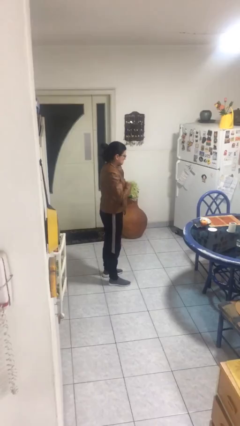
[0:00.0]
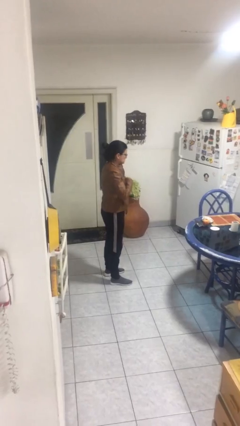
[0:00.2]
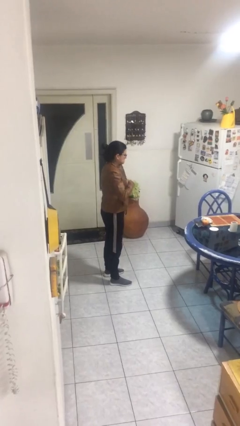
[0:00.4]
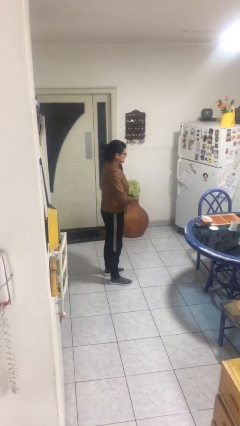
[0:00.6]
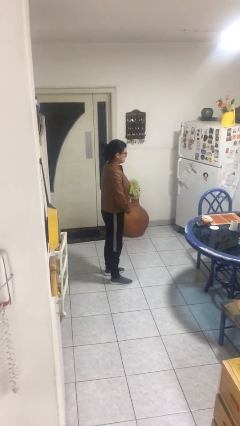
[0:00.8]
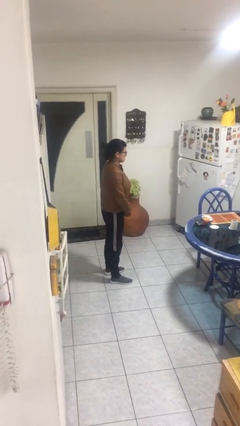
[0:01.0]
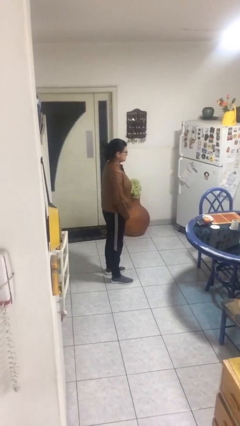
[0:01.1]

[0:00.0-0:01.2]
person unzips jacket

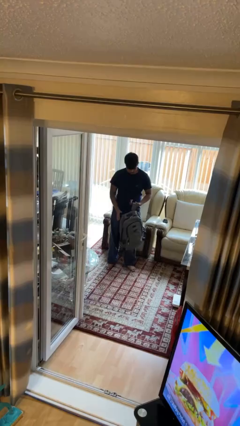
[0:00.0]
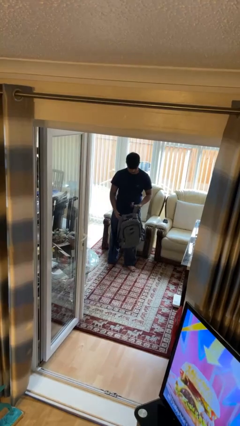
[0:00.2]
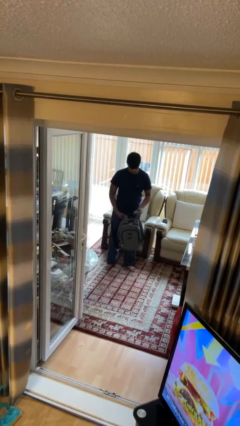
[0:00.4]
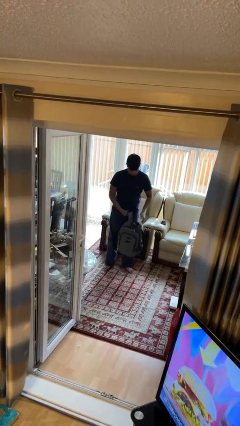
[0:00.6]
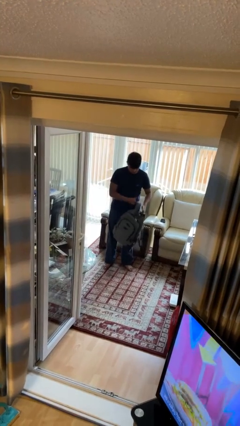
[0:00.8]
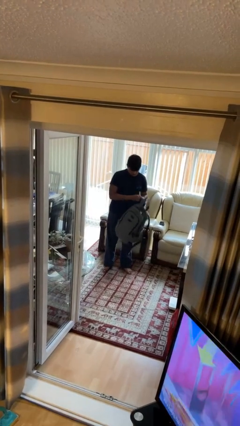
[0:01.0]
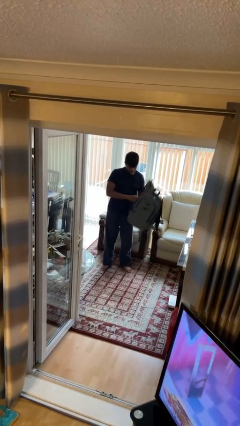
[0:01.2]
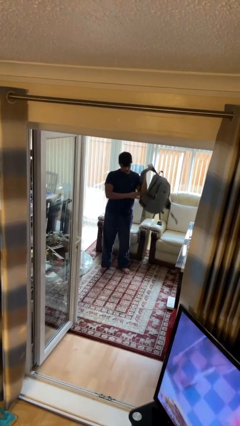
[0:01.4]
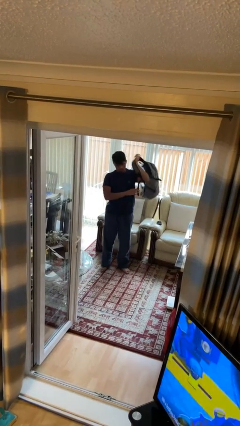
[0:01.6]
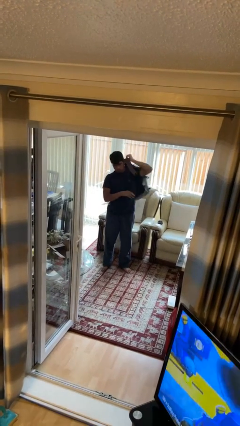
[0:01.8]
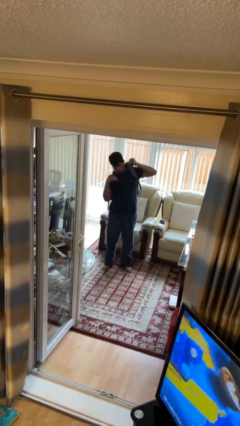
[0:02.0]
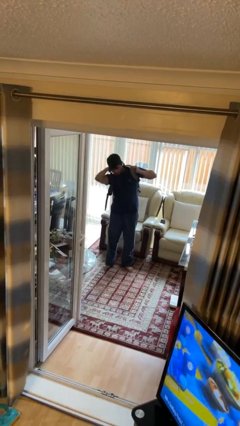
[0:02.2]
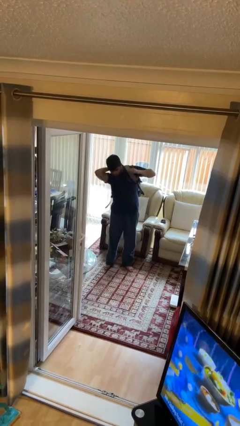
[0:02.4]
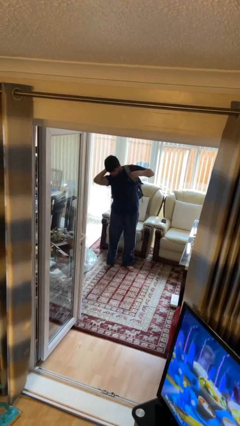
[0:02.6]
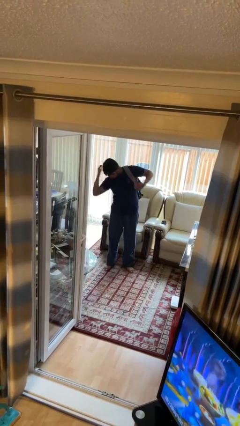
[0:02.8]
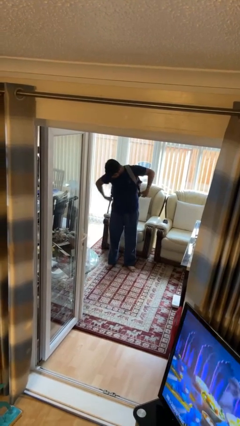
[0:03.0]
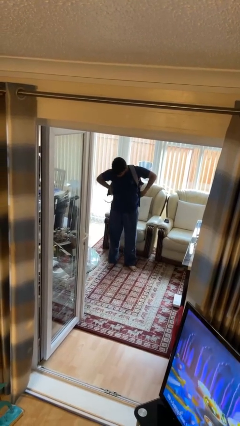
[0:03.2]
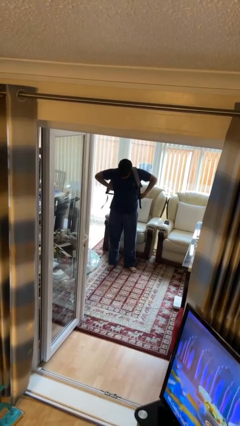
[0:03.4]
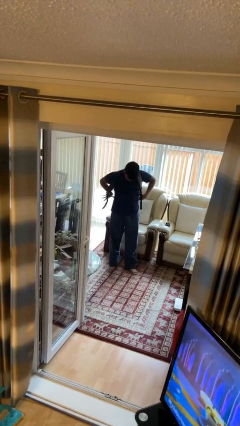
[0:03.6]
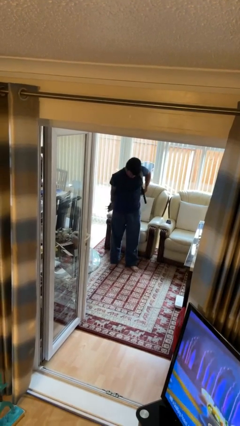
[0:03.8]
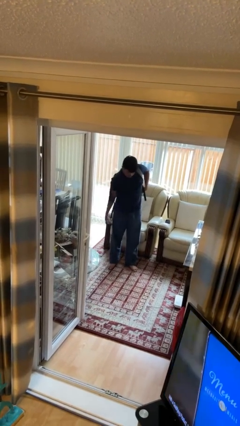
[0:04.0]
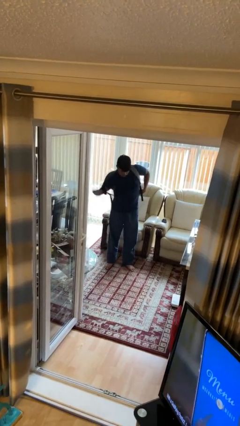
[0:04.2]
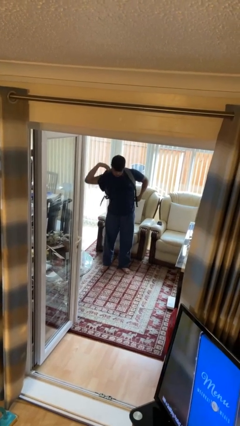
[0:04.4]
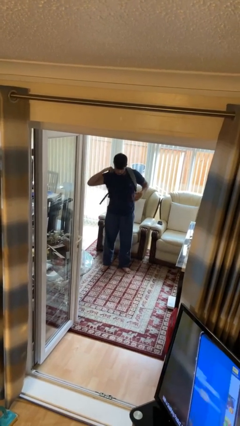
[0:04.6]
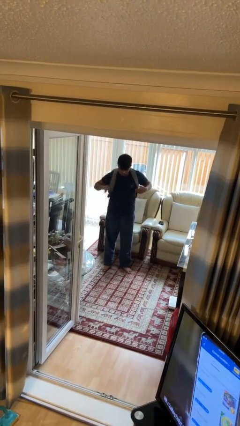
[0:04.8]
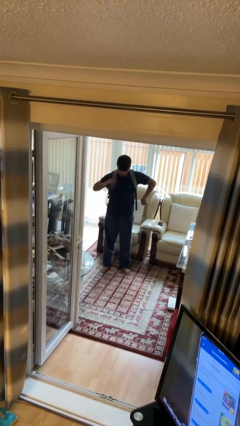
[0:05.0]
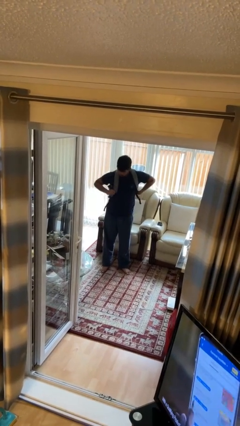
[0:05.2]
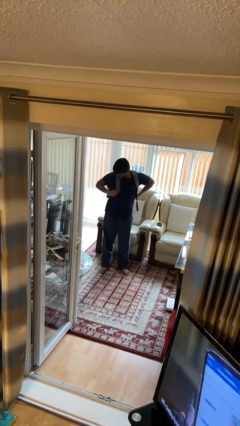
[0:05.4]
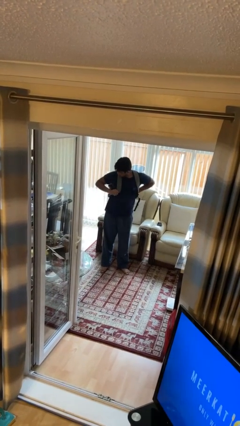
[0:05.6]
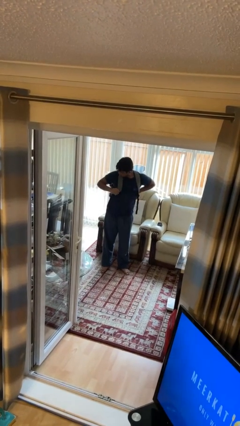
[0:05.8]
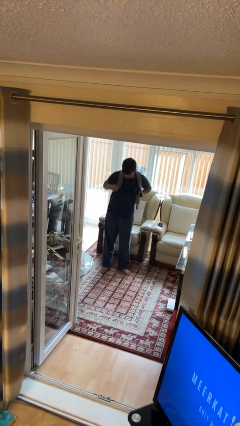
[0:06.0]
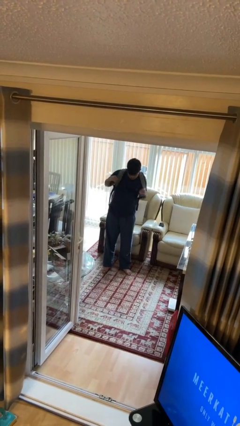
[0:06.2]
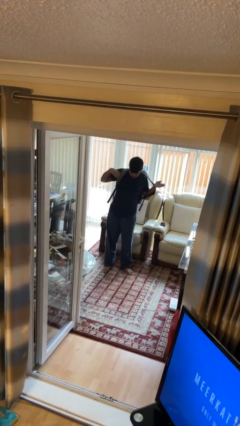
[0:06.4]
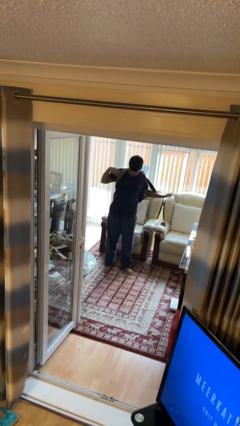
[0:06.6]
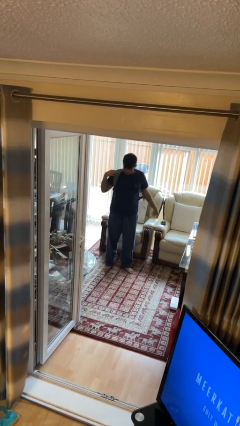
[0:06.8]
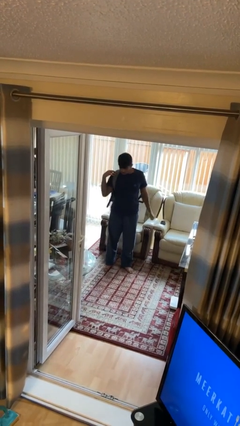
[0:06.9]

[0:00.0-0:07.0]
person puts on backpack

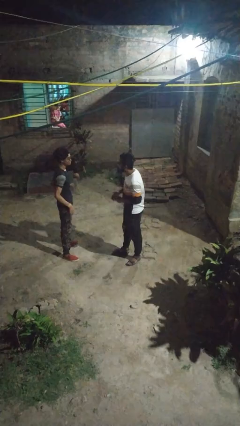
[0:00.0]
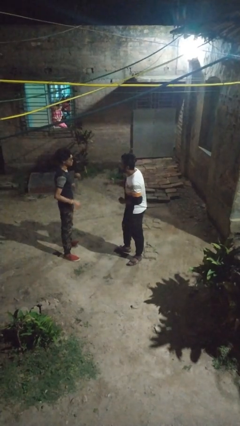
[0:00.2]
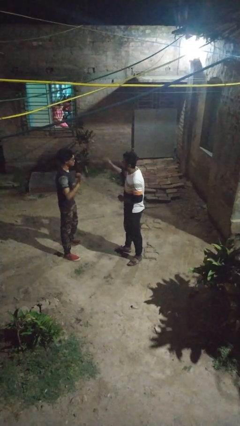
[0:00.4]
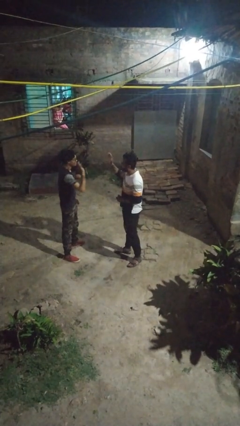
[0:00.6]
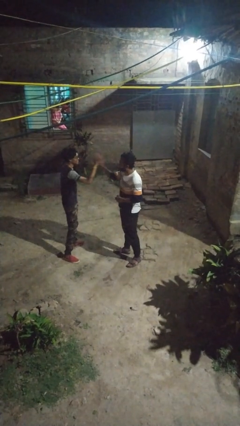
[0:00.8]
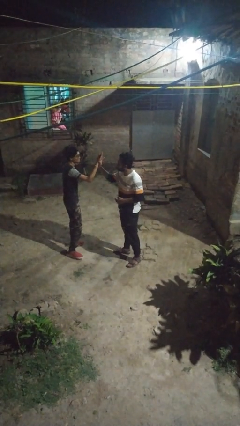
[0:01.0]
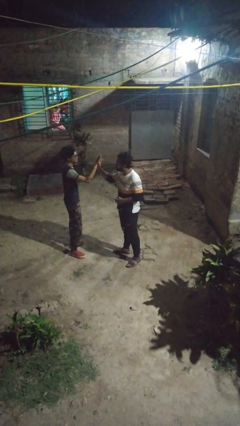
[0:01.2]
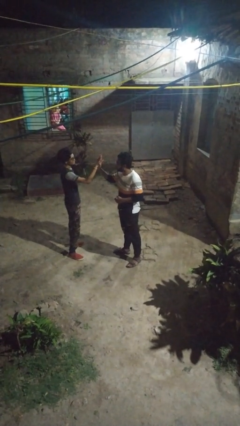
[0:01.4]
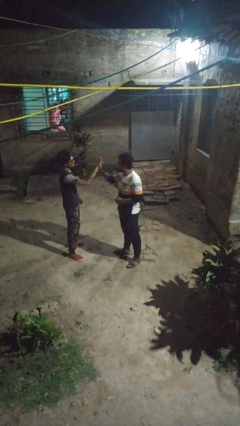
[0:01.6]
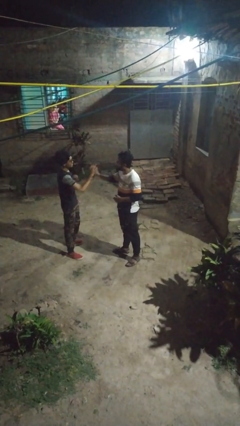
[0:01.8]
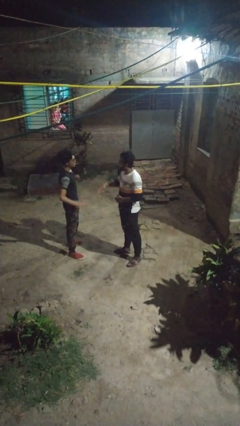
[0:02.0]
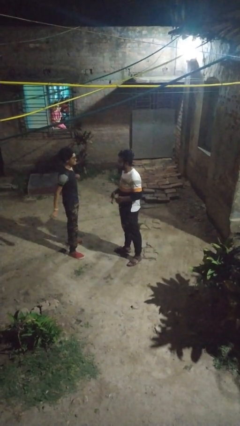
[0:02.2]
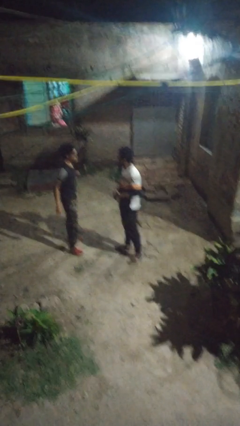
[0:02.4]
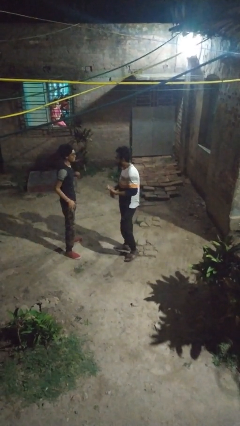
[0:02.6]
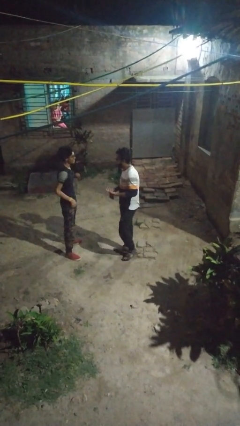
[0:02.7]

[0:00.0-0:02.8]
person highfives hand

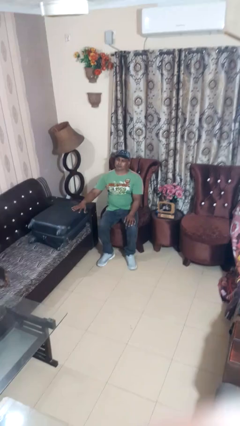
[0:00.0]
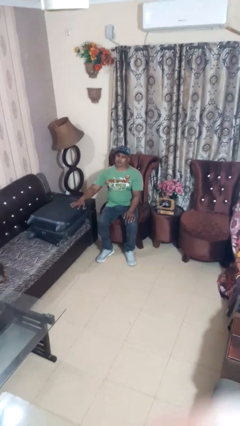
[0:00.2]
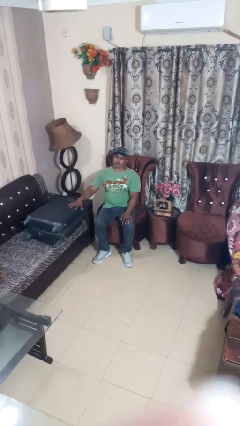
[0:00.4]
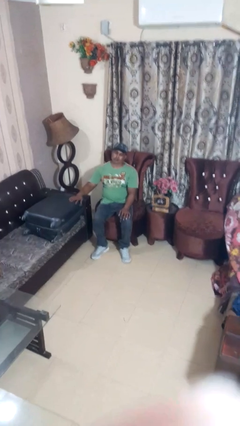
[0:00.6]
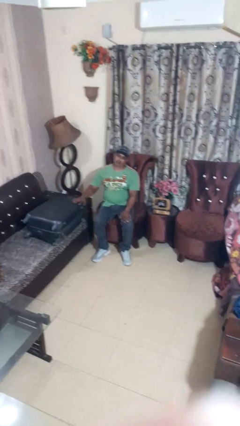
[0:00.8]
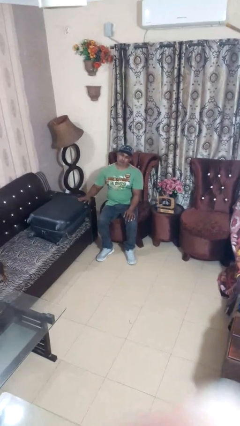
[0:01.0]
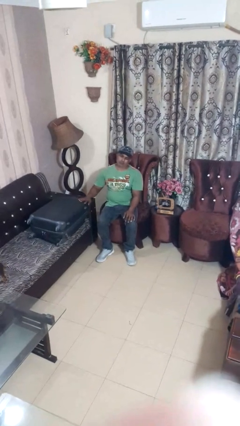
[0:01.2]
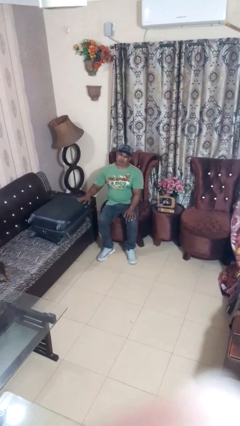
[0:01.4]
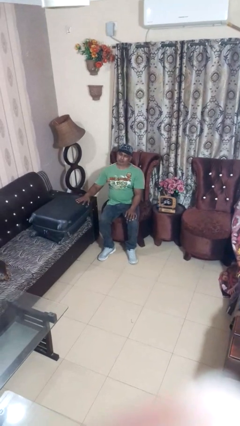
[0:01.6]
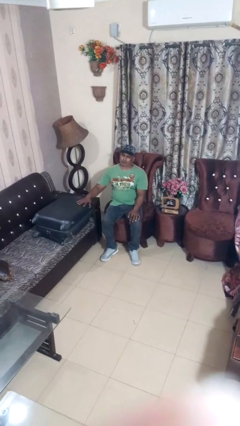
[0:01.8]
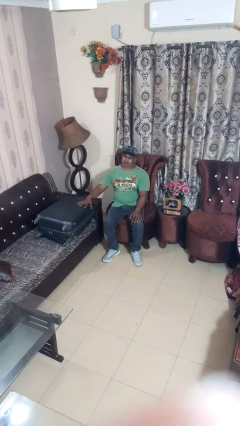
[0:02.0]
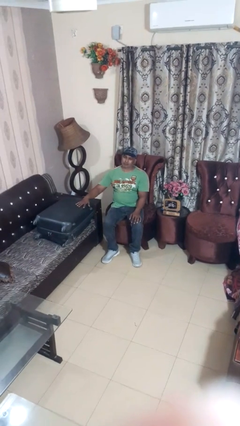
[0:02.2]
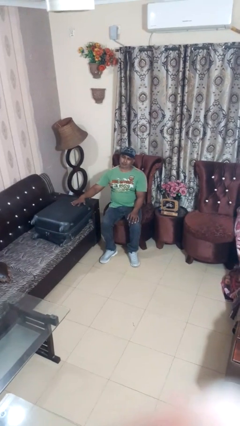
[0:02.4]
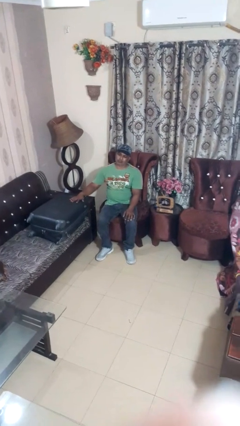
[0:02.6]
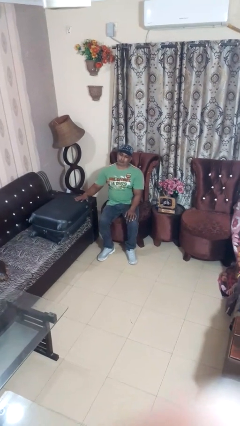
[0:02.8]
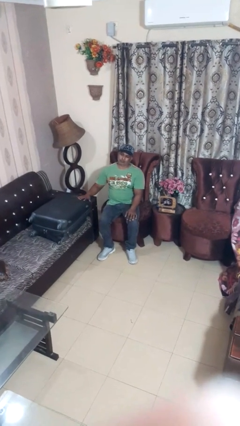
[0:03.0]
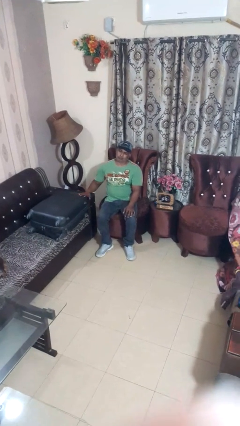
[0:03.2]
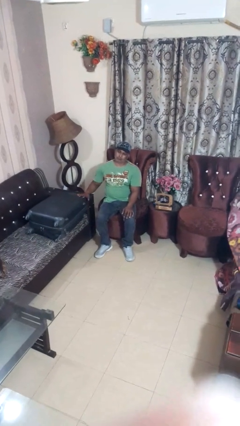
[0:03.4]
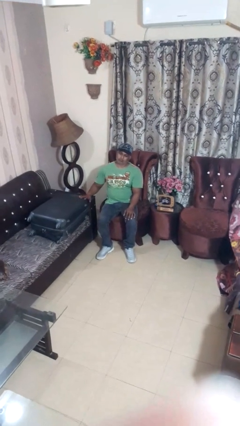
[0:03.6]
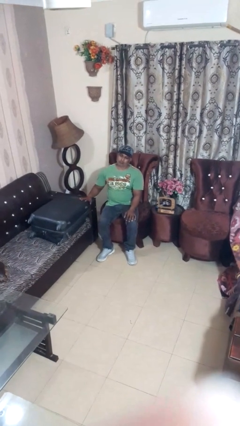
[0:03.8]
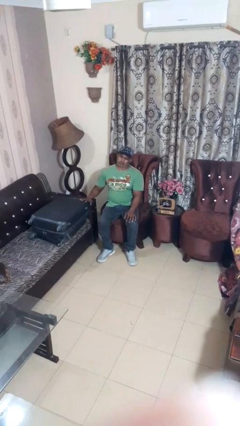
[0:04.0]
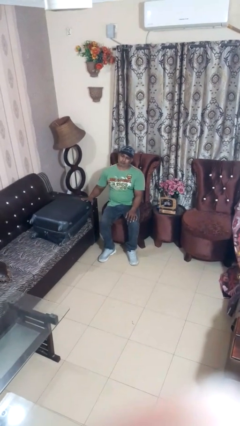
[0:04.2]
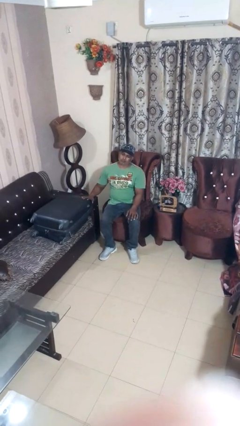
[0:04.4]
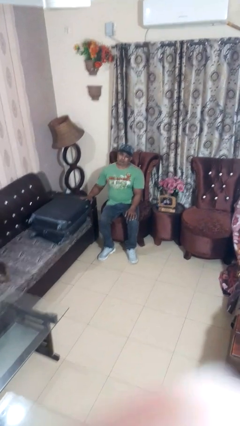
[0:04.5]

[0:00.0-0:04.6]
person waves hand over object

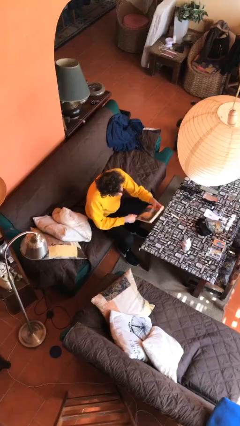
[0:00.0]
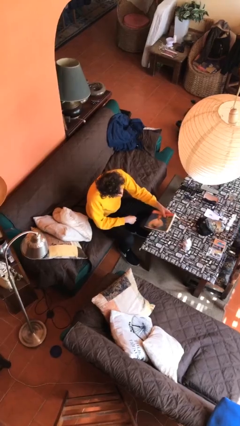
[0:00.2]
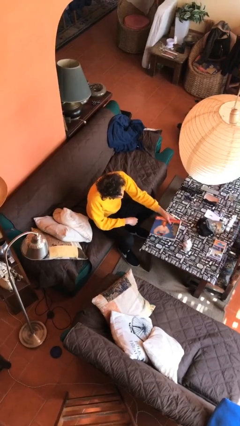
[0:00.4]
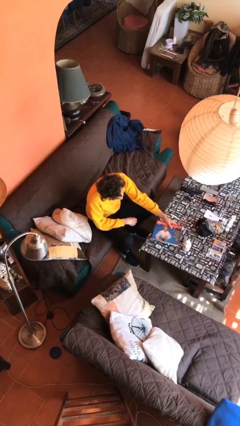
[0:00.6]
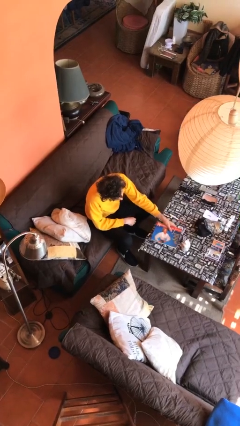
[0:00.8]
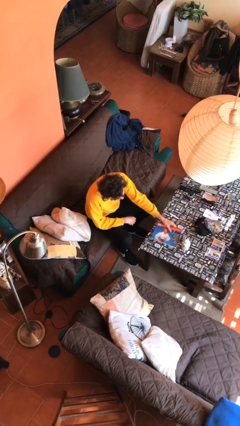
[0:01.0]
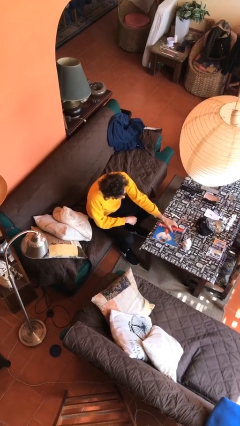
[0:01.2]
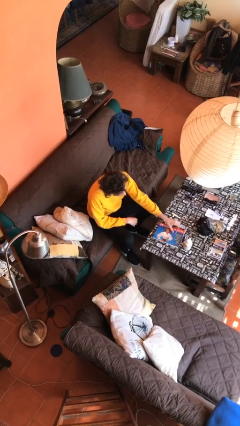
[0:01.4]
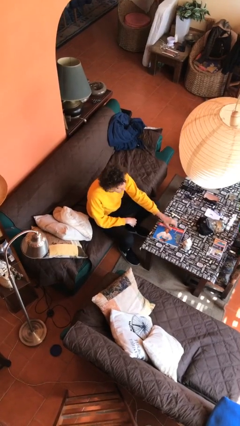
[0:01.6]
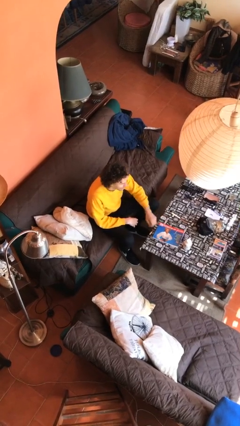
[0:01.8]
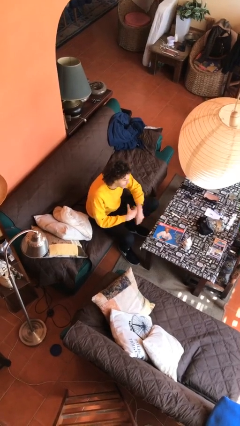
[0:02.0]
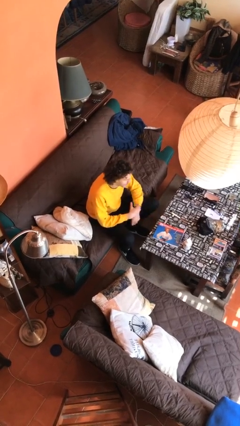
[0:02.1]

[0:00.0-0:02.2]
person puts down object on table
